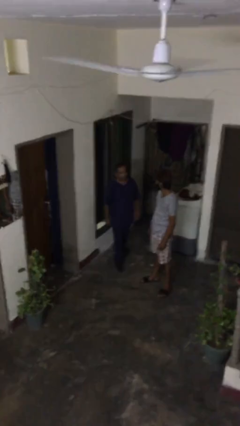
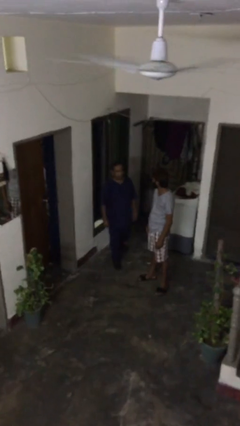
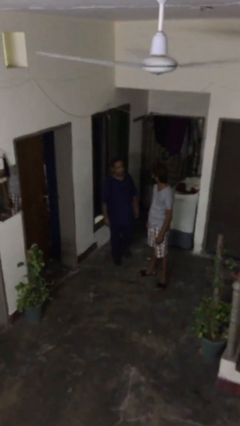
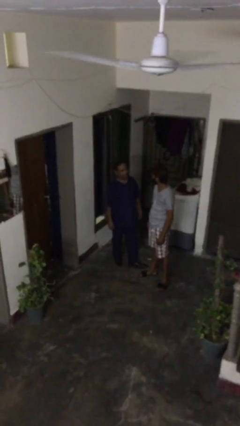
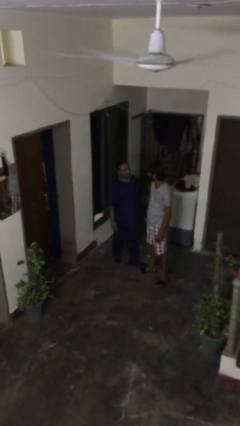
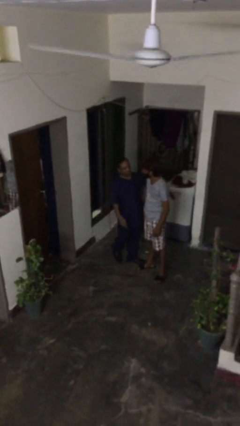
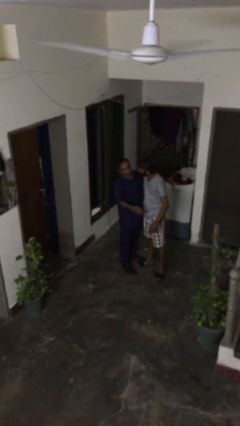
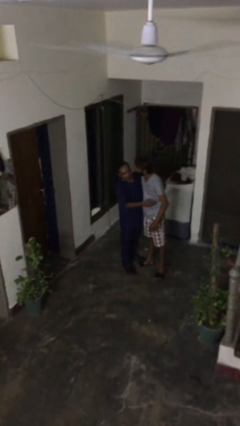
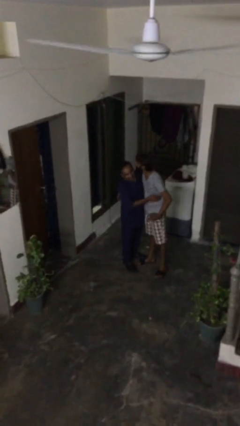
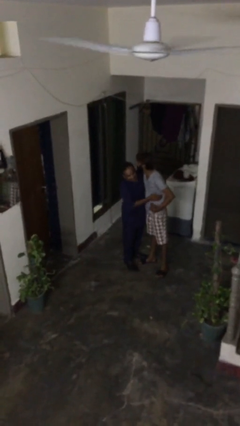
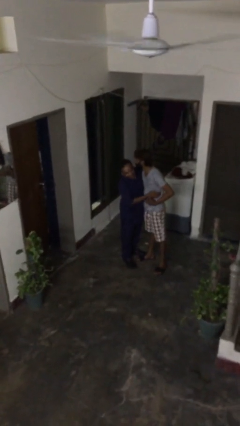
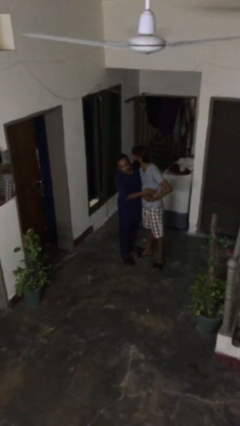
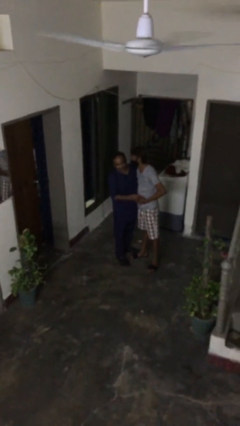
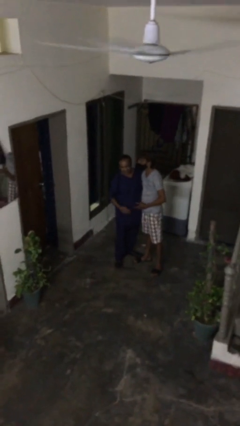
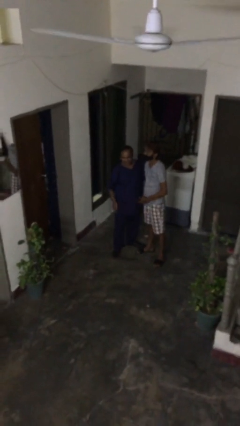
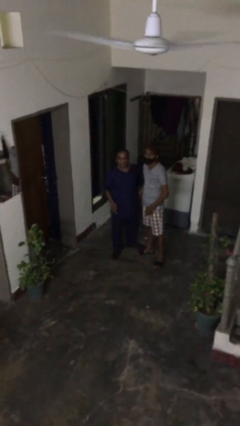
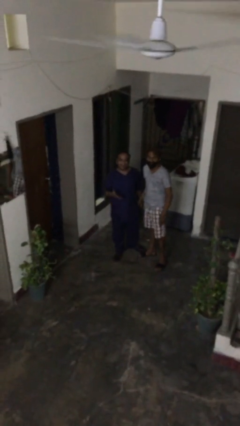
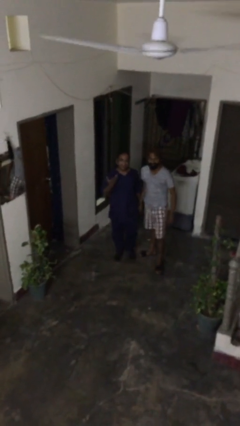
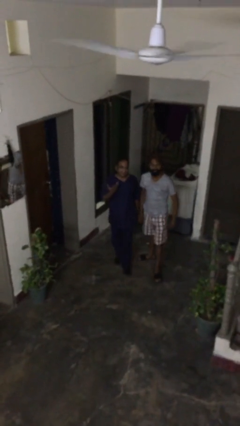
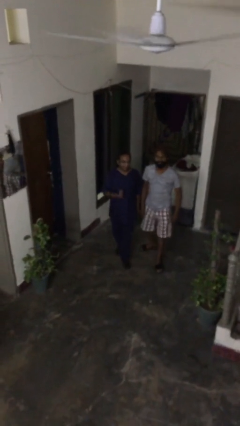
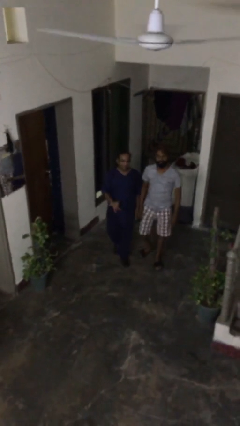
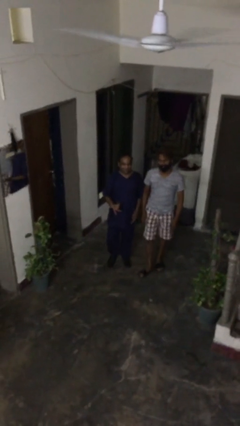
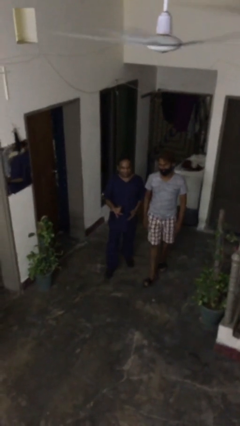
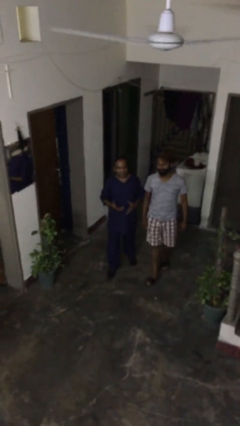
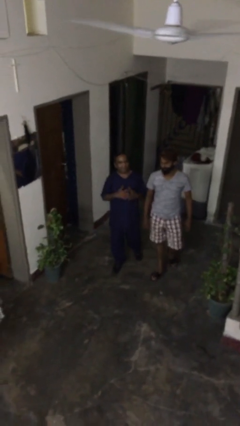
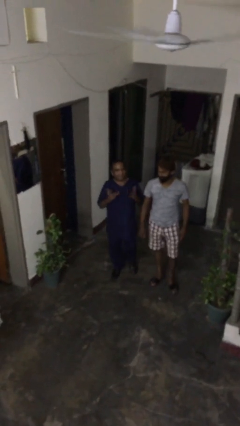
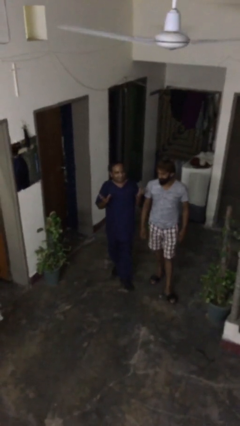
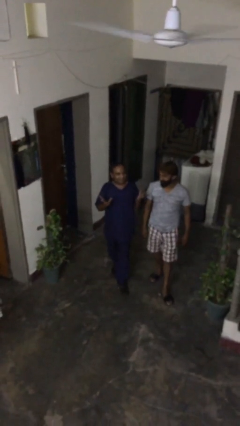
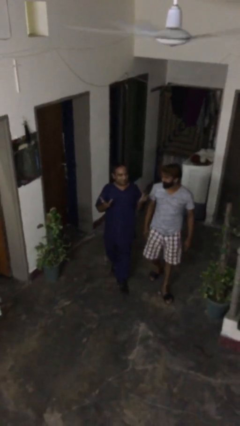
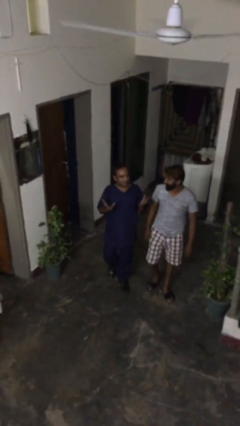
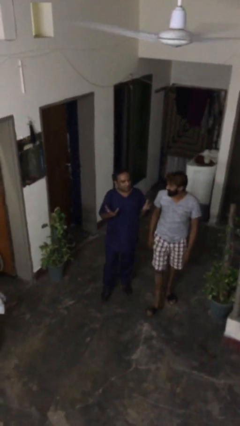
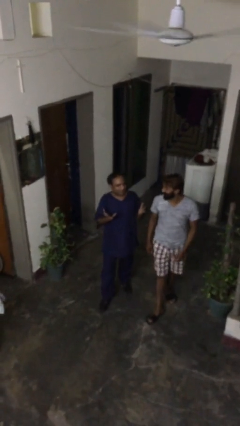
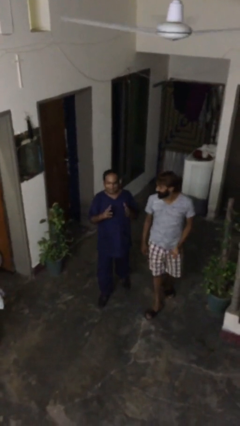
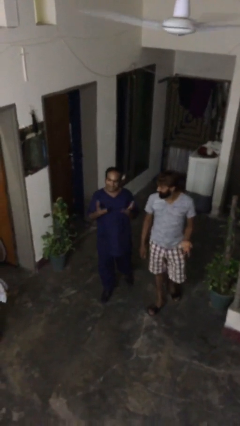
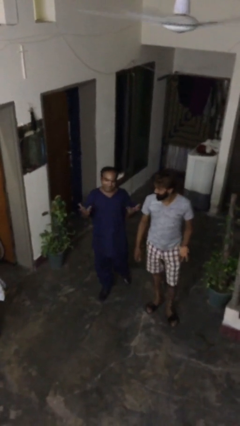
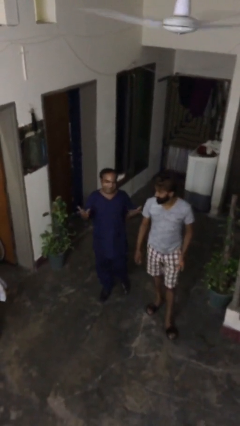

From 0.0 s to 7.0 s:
person embraces person

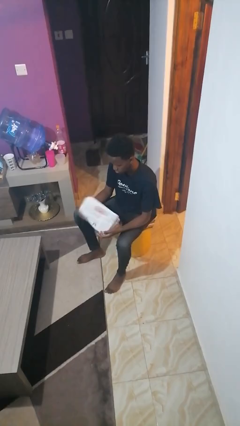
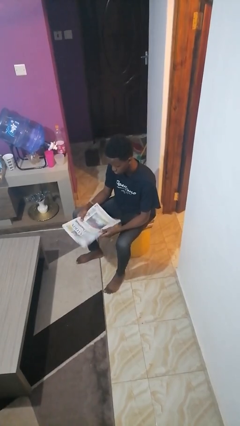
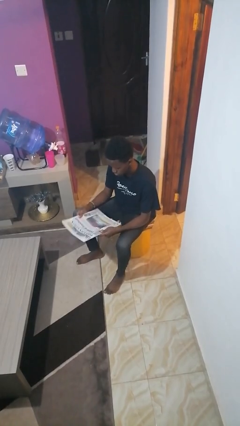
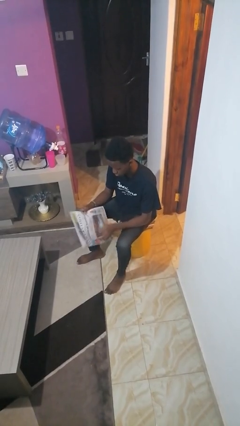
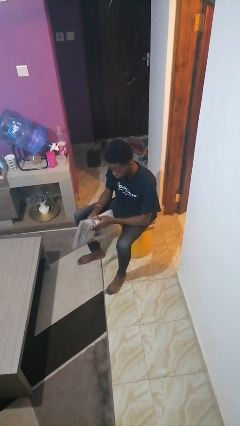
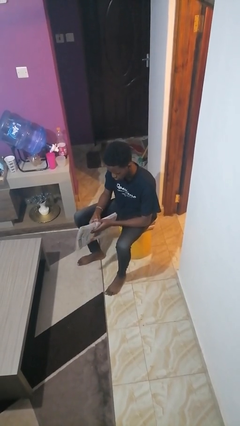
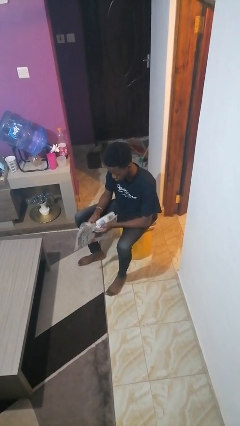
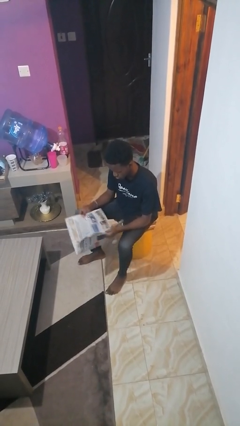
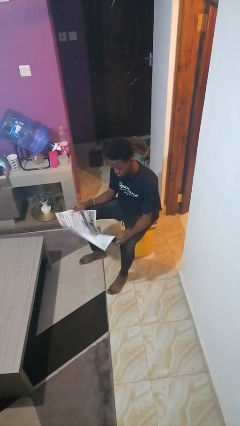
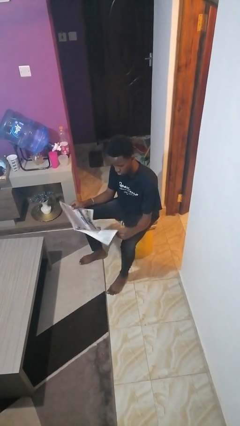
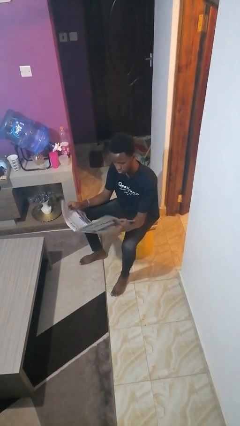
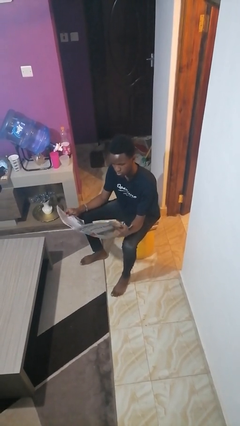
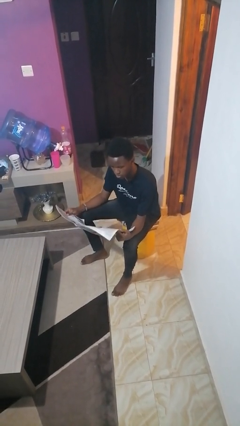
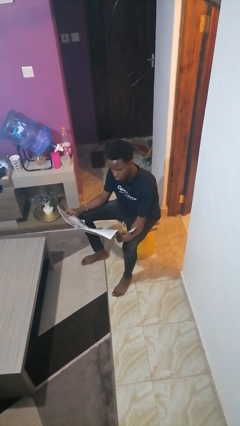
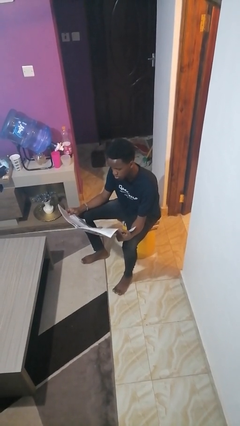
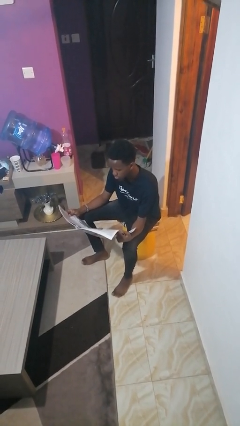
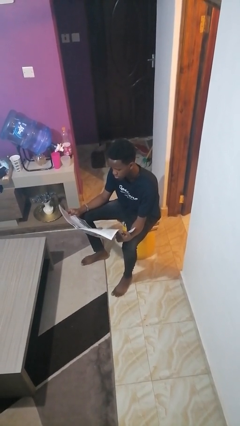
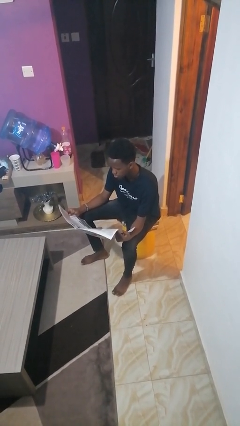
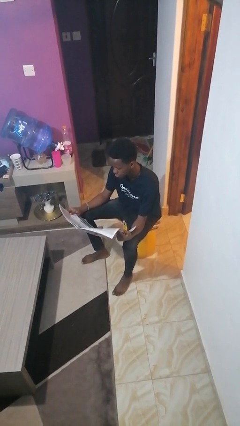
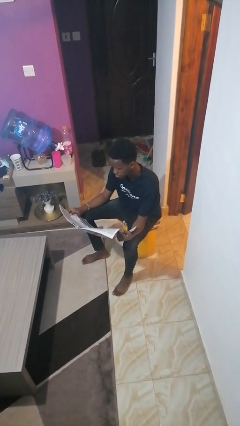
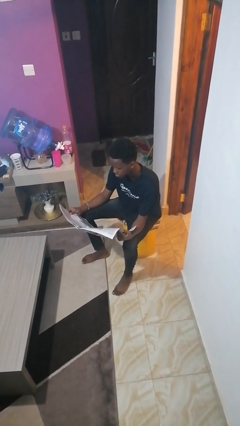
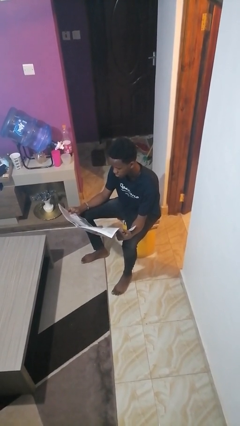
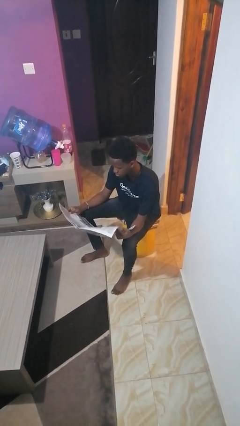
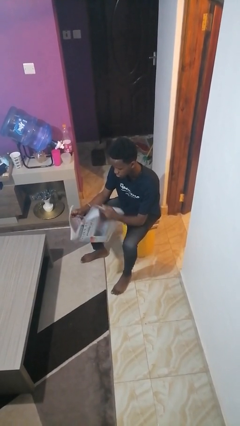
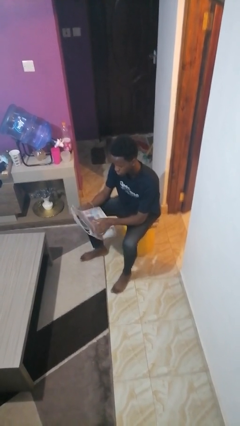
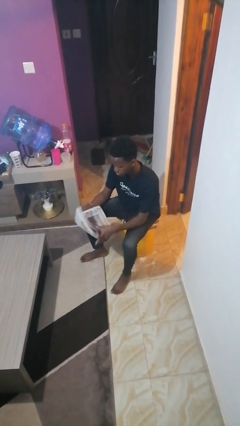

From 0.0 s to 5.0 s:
person reads newspaper

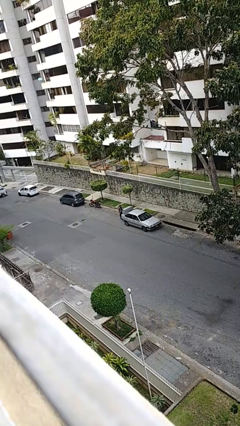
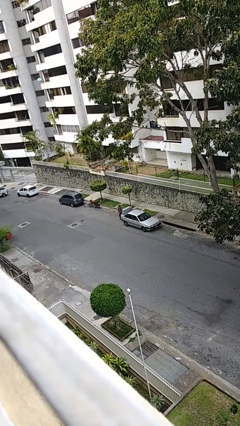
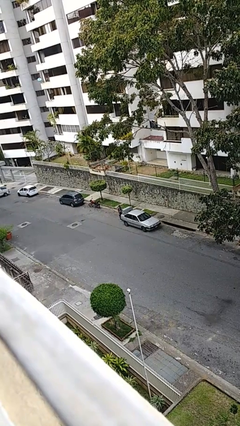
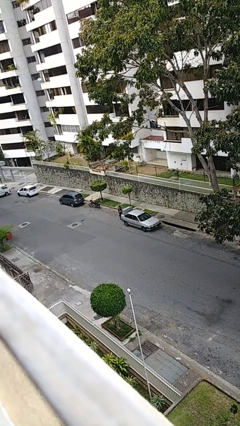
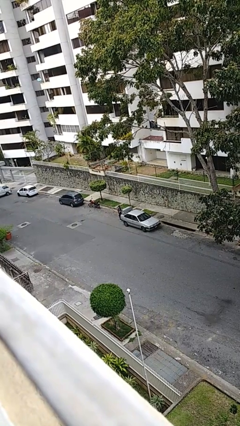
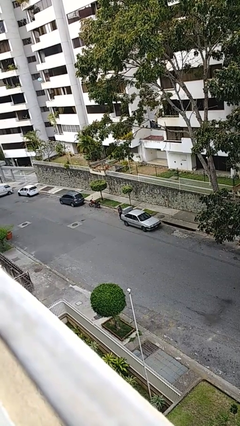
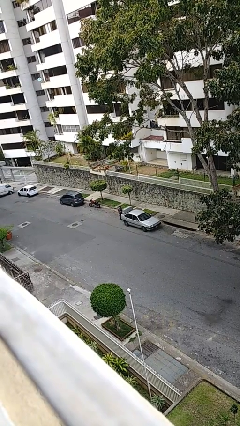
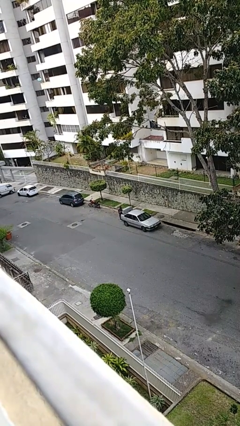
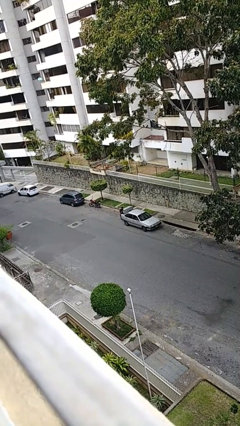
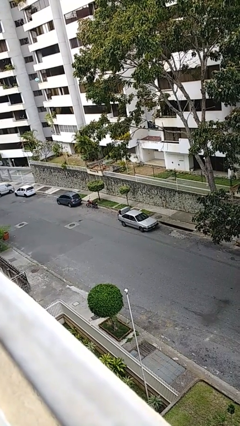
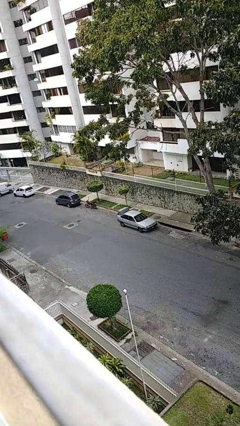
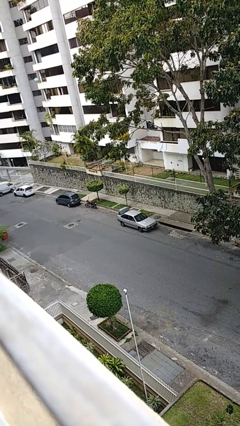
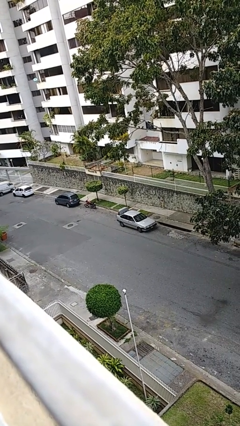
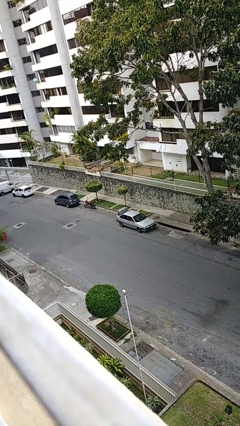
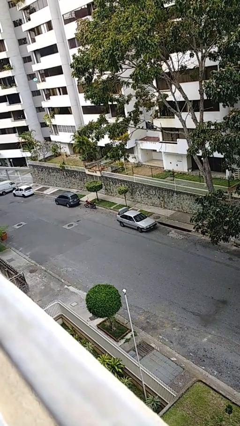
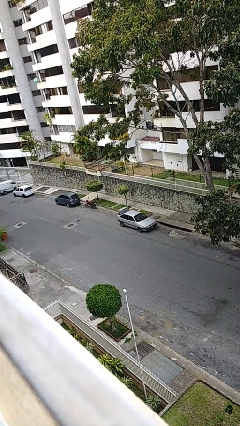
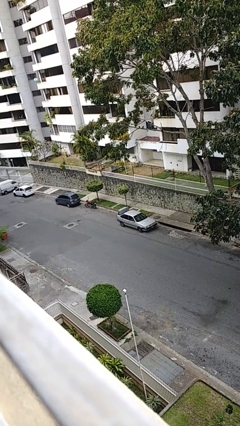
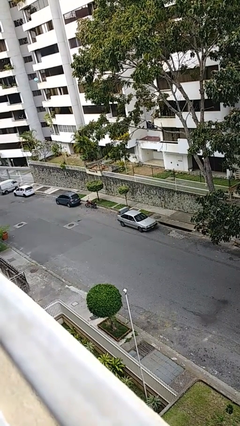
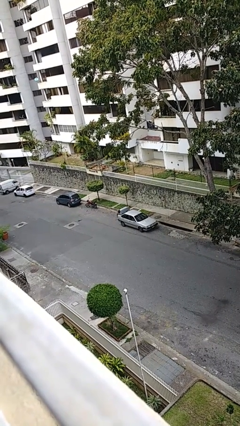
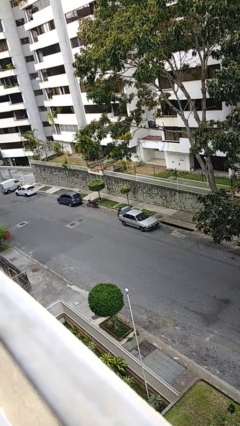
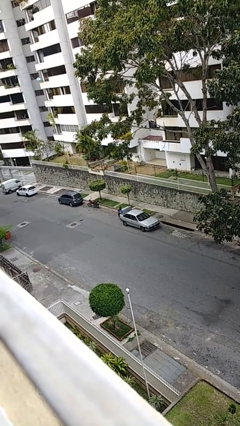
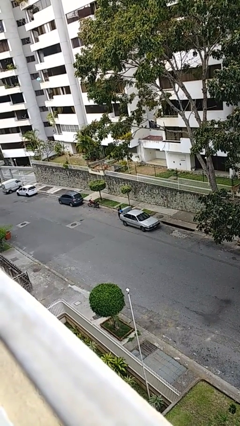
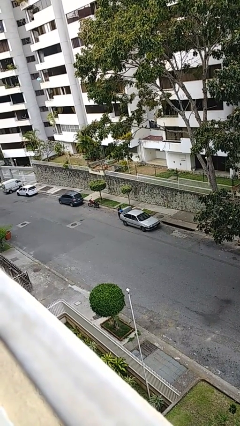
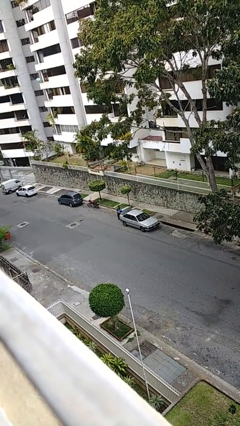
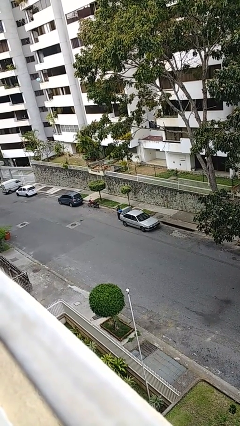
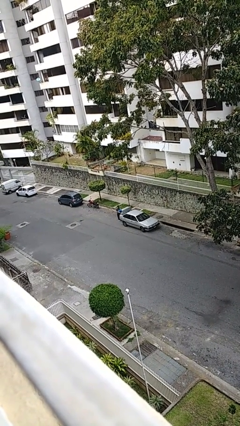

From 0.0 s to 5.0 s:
person unloads car

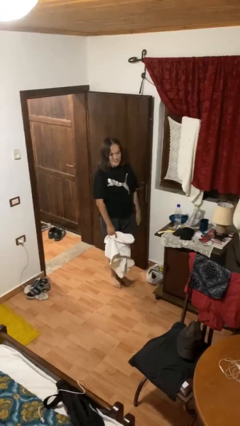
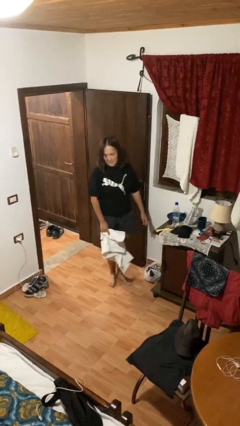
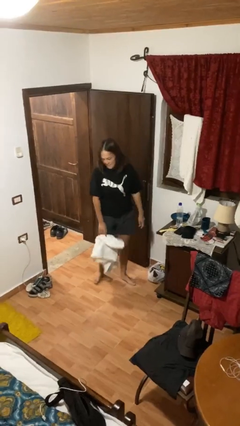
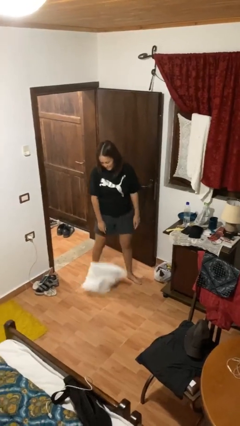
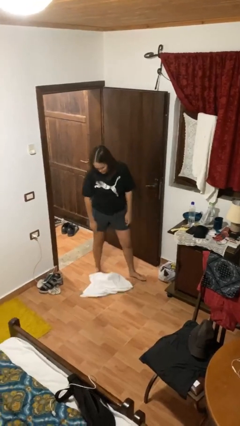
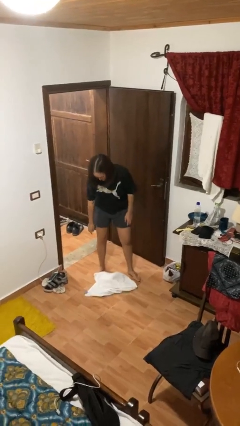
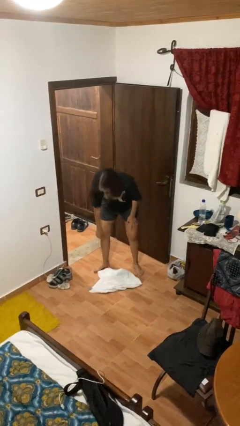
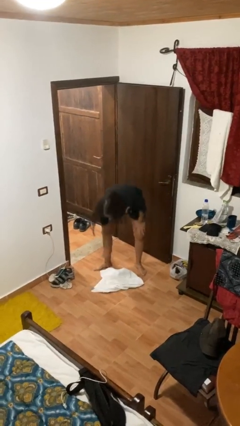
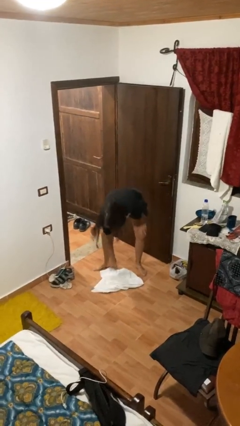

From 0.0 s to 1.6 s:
person drops object
